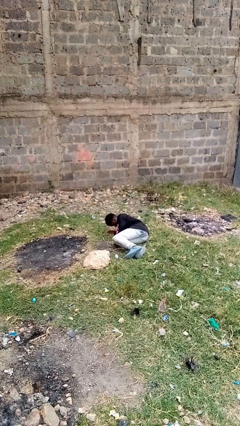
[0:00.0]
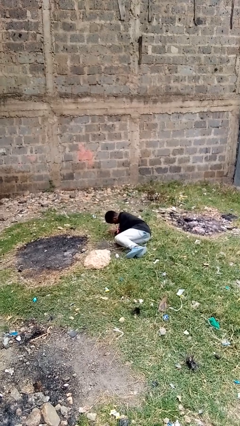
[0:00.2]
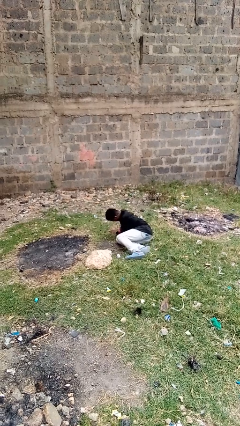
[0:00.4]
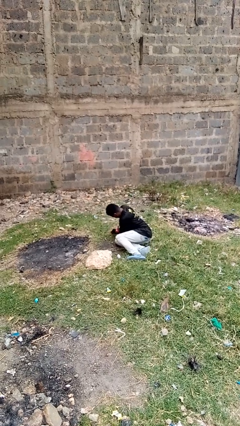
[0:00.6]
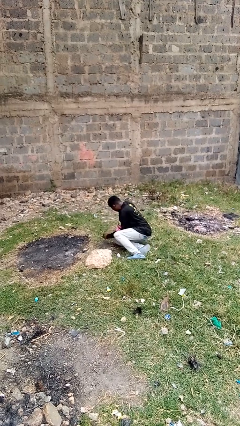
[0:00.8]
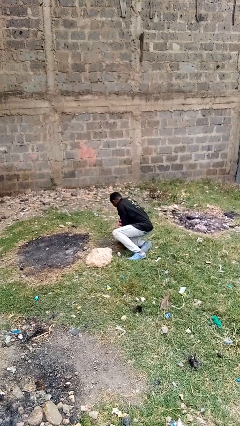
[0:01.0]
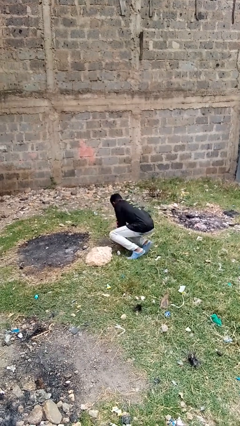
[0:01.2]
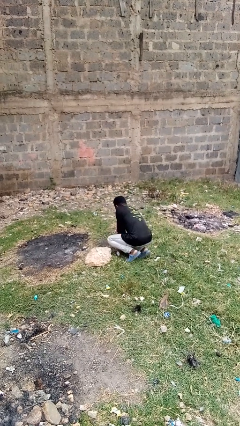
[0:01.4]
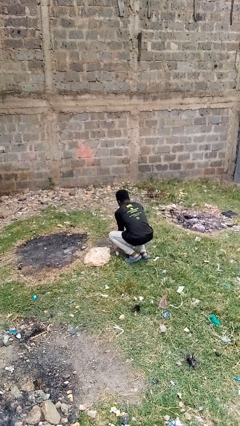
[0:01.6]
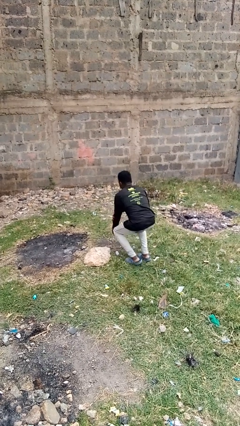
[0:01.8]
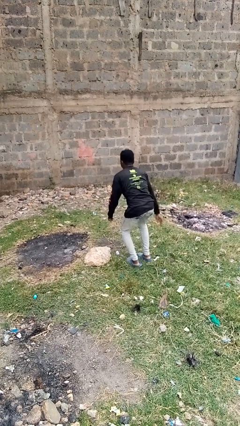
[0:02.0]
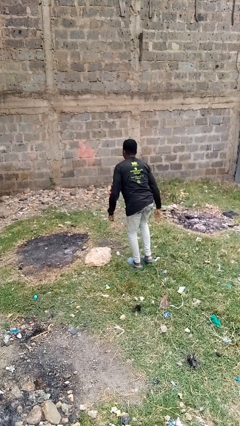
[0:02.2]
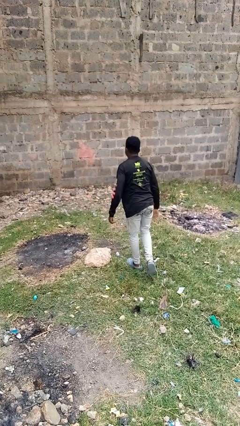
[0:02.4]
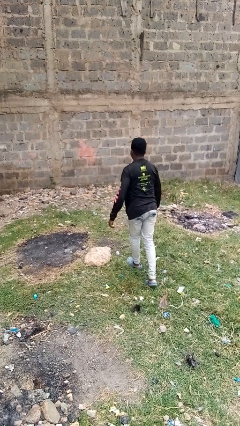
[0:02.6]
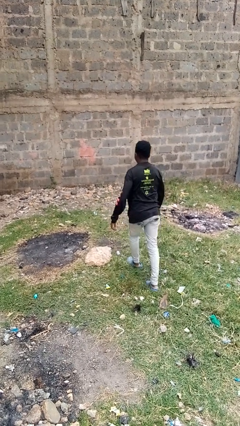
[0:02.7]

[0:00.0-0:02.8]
person stands up from floor

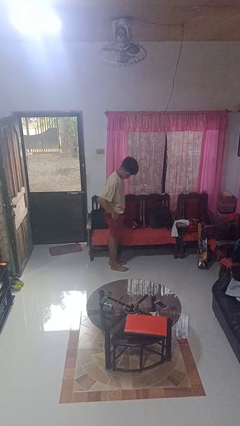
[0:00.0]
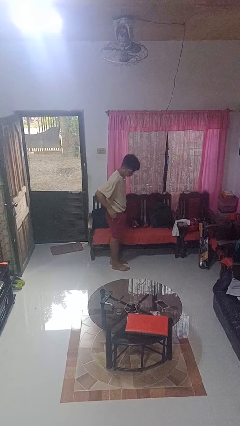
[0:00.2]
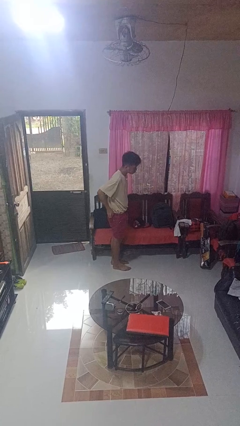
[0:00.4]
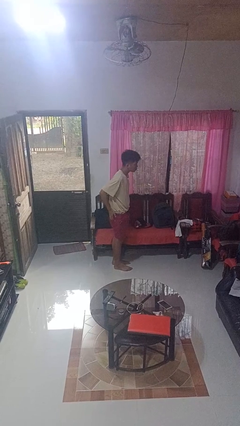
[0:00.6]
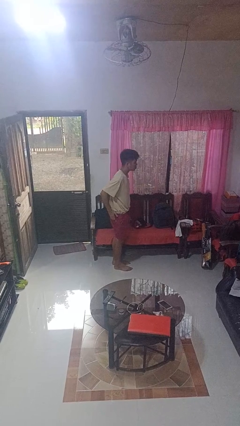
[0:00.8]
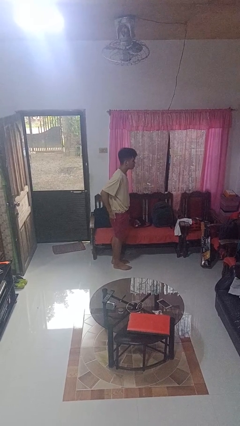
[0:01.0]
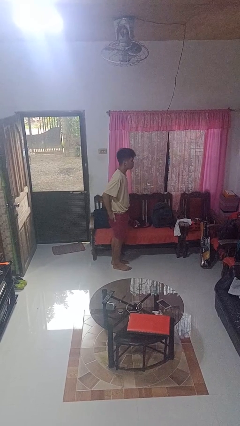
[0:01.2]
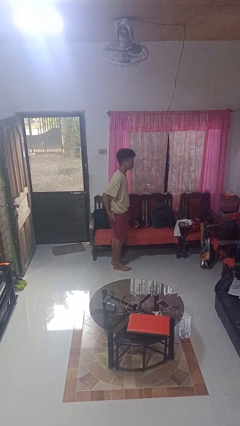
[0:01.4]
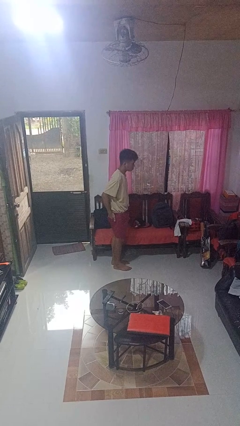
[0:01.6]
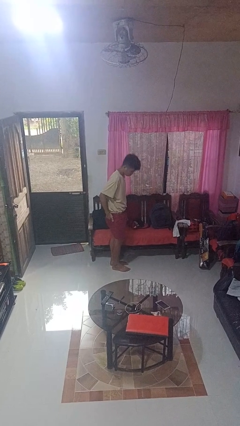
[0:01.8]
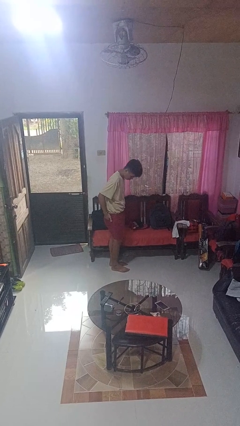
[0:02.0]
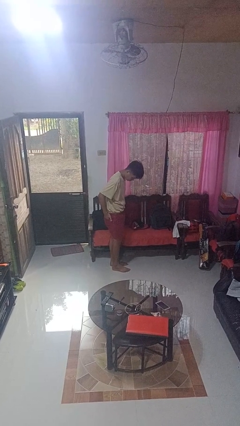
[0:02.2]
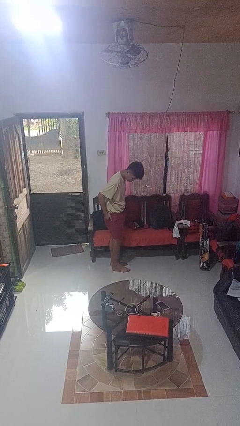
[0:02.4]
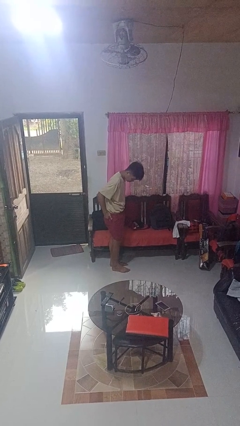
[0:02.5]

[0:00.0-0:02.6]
person puts hands in back pockets

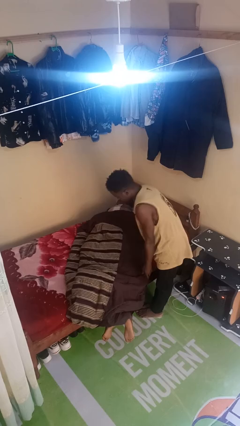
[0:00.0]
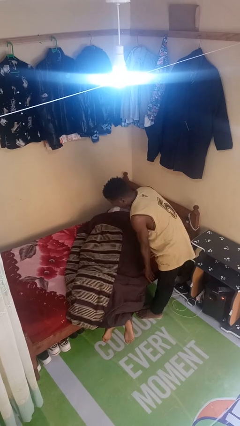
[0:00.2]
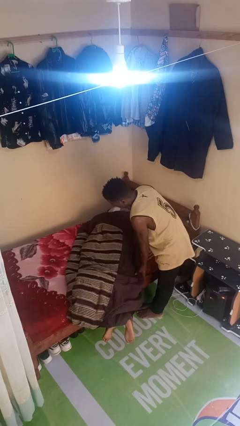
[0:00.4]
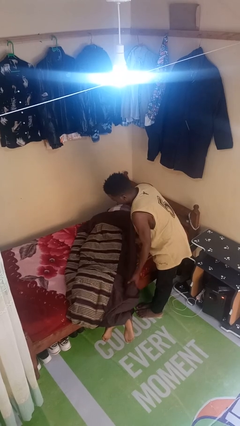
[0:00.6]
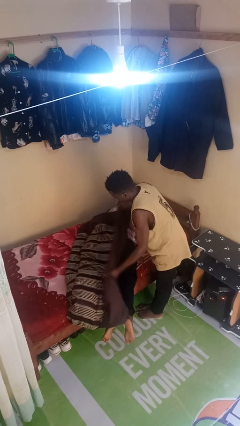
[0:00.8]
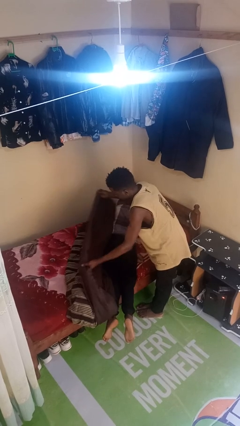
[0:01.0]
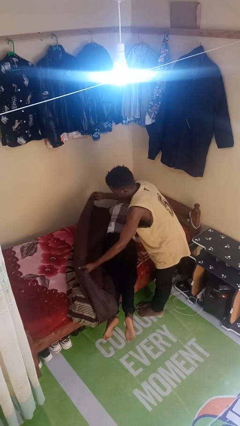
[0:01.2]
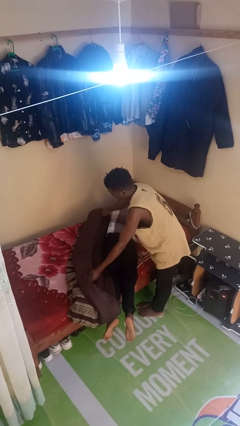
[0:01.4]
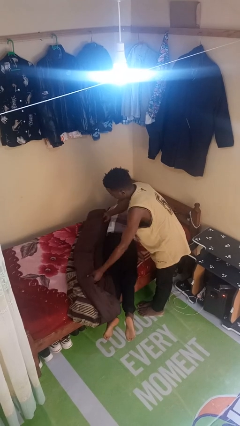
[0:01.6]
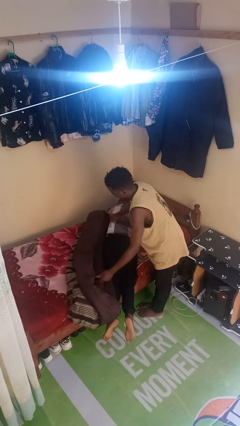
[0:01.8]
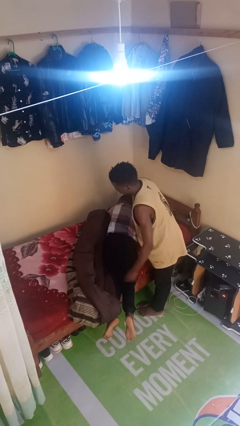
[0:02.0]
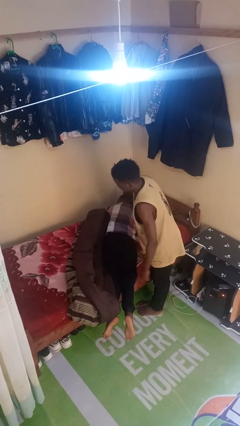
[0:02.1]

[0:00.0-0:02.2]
person uncovers friend with blanket

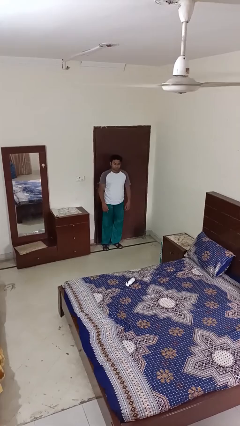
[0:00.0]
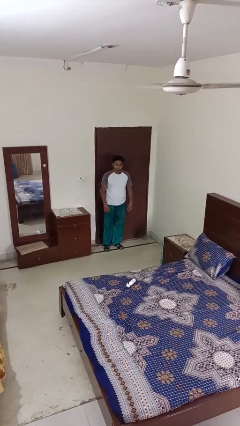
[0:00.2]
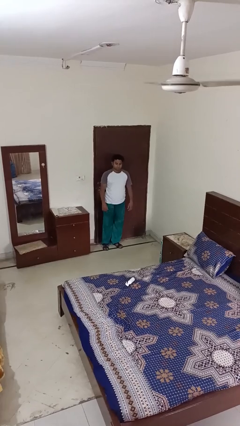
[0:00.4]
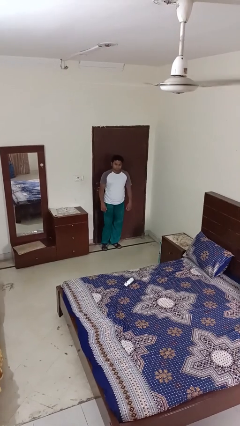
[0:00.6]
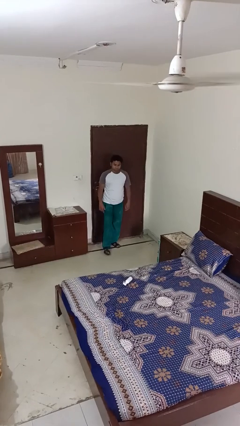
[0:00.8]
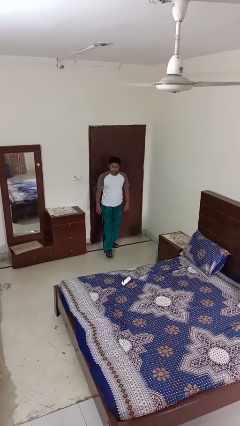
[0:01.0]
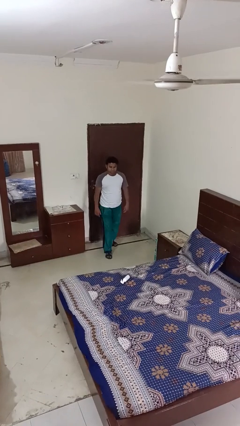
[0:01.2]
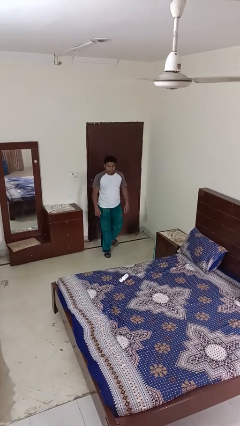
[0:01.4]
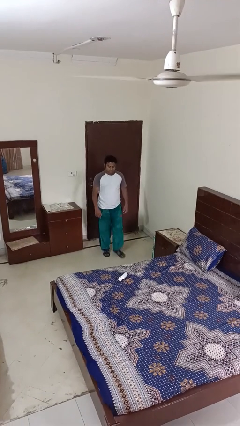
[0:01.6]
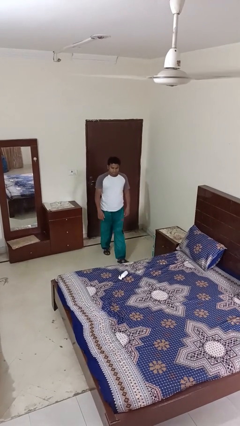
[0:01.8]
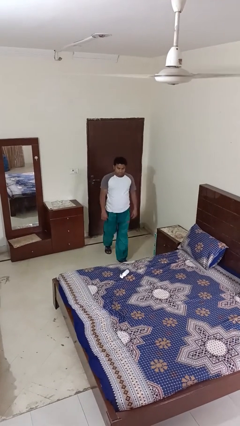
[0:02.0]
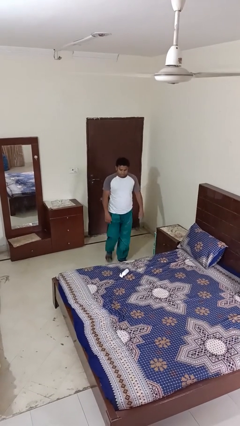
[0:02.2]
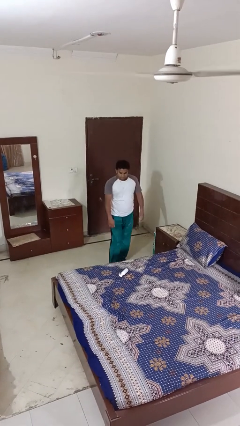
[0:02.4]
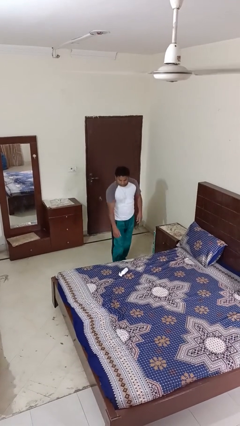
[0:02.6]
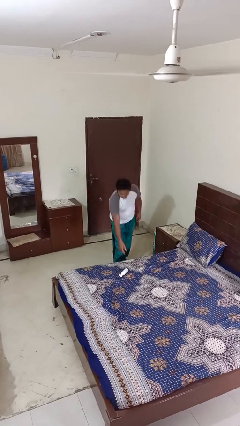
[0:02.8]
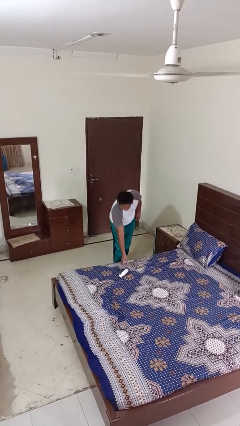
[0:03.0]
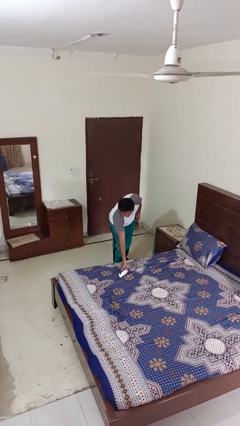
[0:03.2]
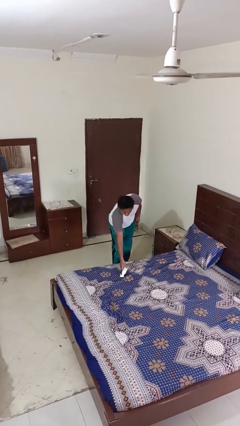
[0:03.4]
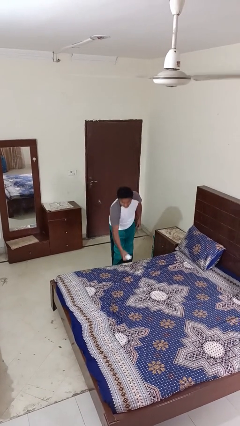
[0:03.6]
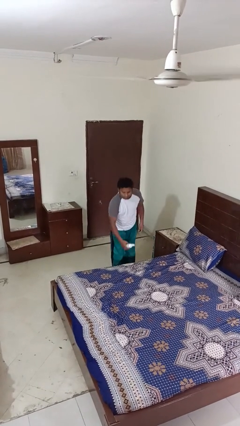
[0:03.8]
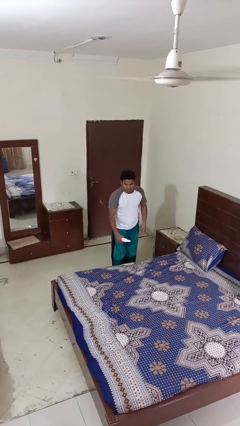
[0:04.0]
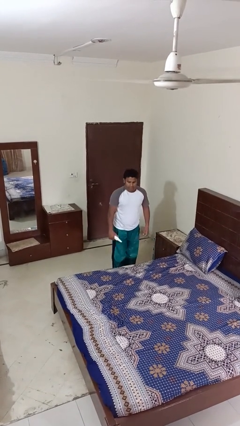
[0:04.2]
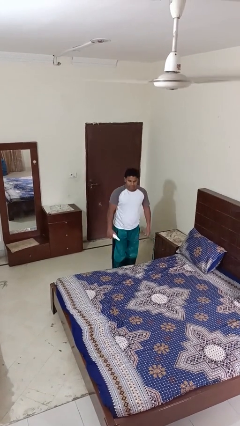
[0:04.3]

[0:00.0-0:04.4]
person picks up object from bed
